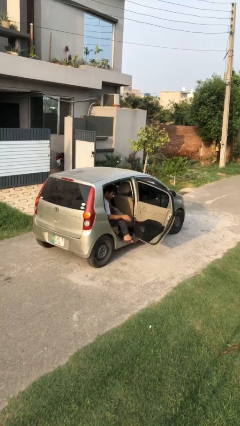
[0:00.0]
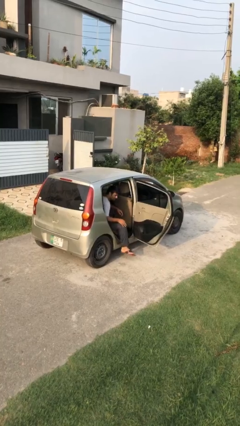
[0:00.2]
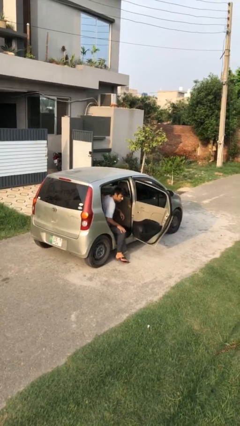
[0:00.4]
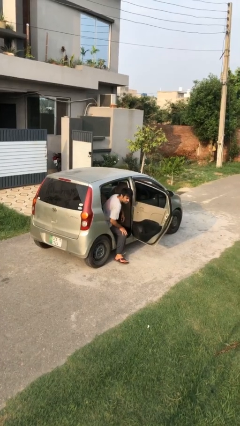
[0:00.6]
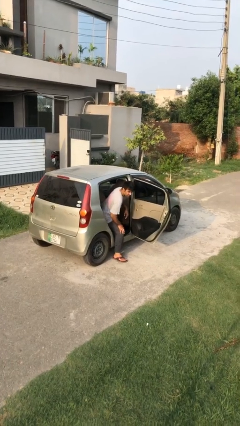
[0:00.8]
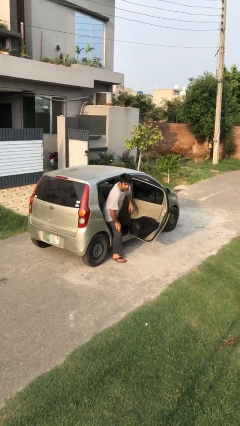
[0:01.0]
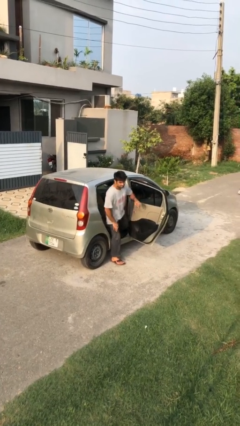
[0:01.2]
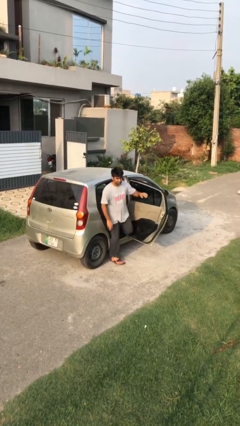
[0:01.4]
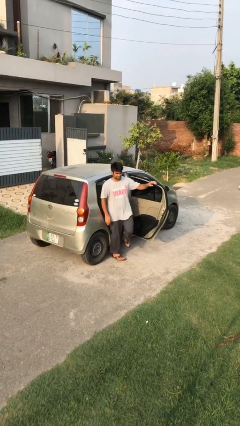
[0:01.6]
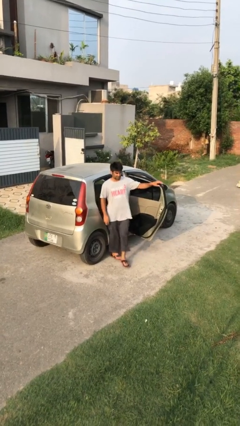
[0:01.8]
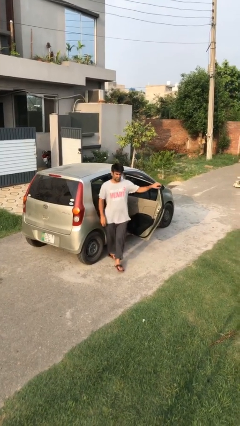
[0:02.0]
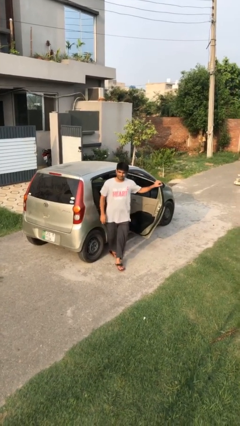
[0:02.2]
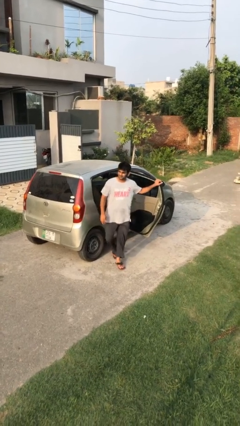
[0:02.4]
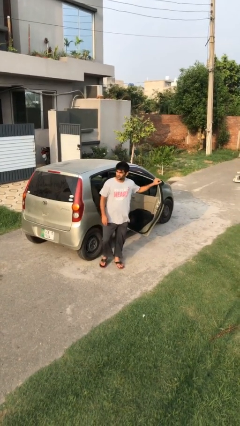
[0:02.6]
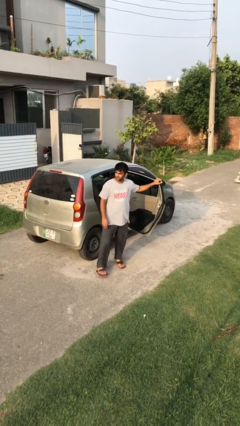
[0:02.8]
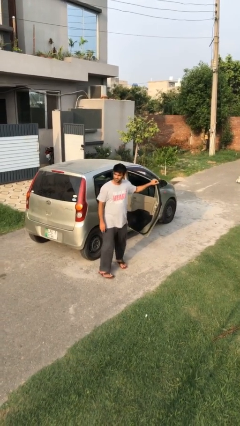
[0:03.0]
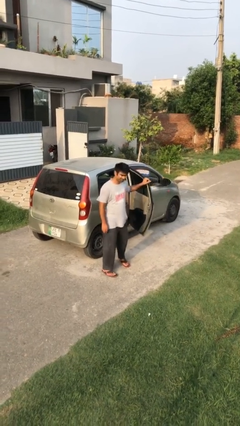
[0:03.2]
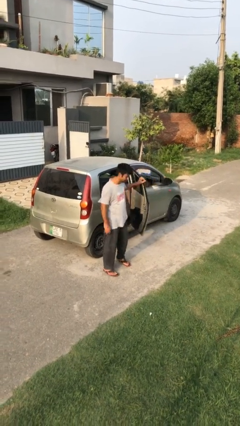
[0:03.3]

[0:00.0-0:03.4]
person exits car

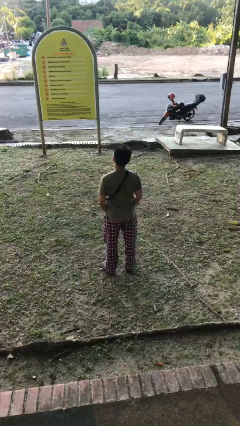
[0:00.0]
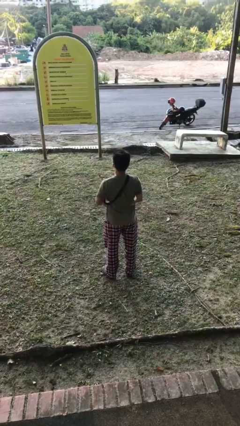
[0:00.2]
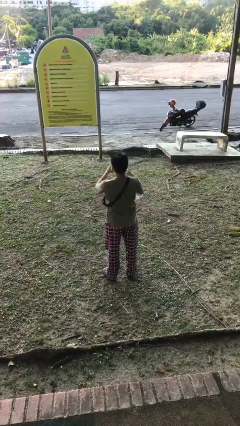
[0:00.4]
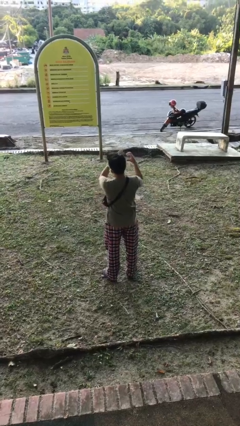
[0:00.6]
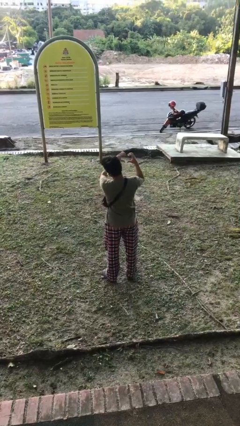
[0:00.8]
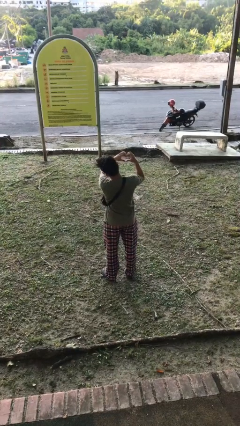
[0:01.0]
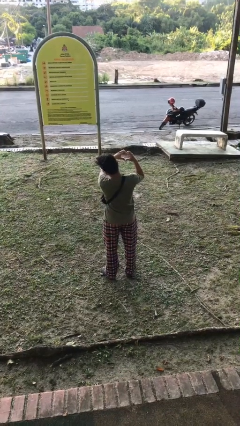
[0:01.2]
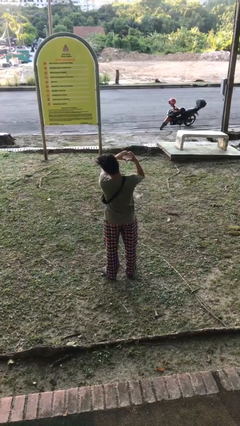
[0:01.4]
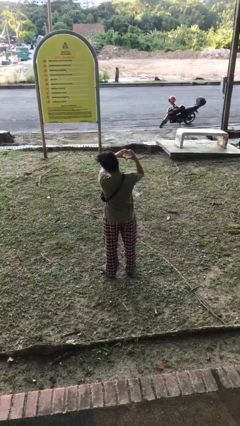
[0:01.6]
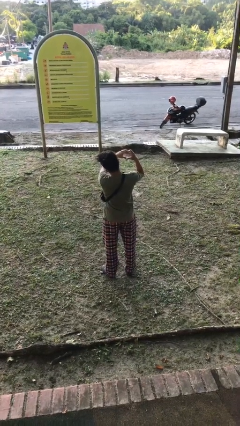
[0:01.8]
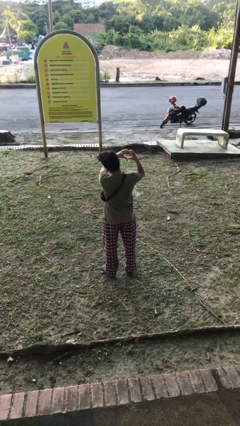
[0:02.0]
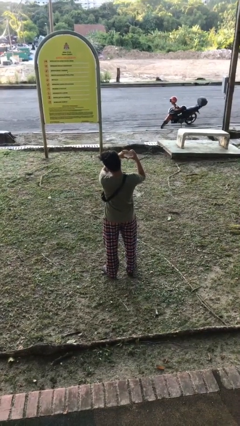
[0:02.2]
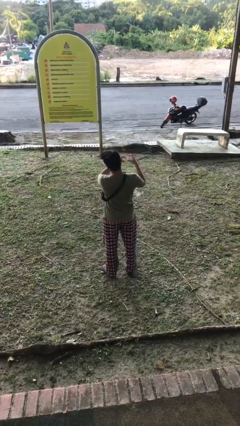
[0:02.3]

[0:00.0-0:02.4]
person gestures heart

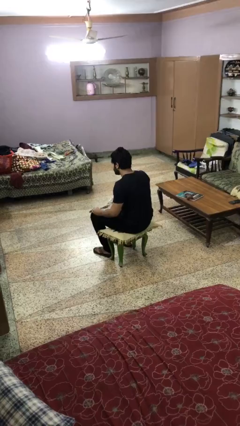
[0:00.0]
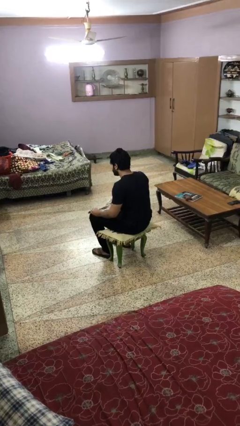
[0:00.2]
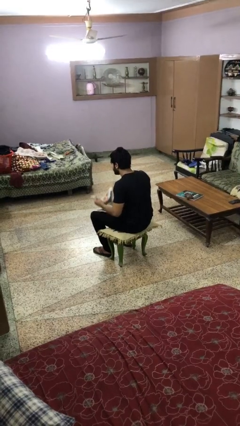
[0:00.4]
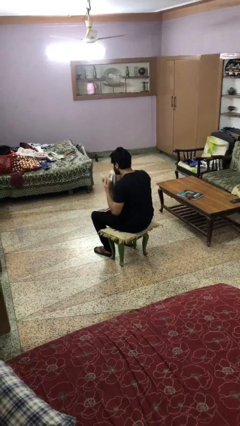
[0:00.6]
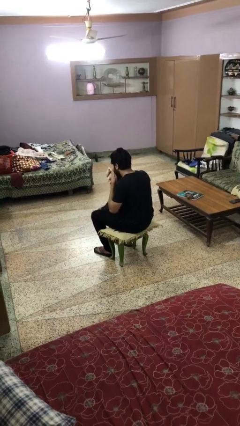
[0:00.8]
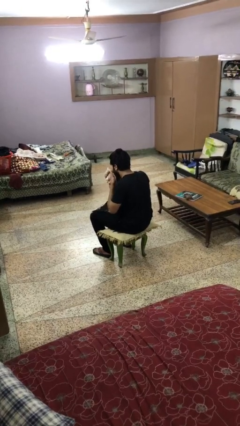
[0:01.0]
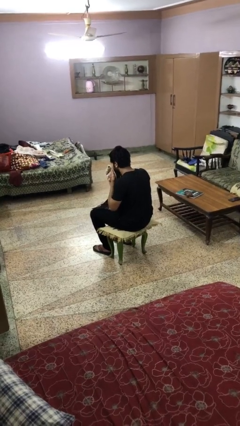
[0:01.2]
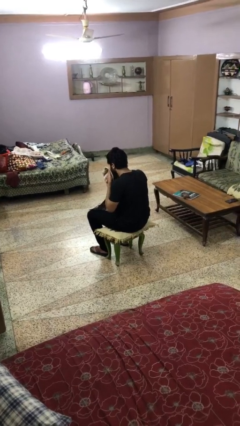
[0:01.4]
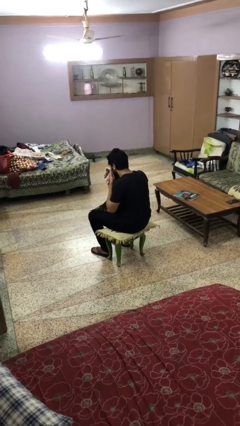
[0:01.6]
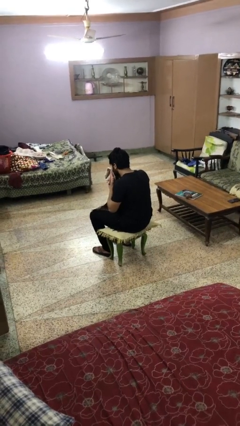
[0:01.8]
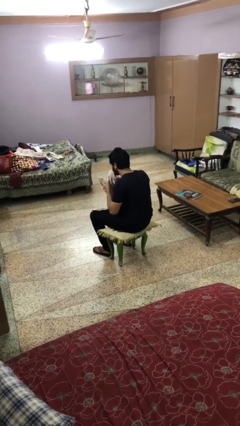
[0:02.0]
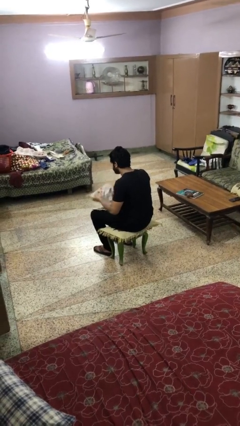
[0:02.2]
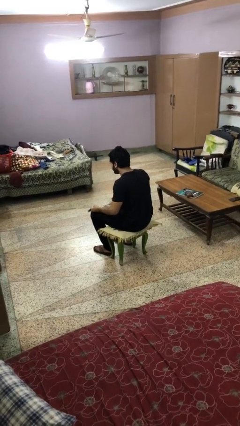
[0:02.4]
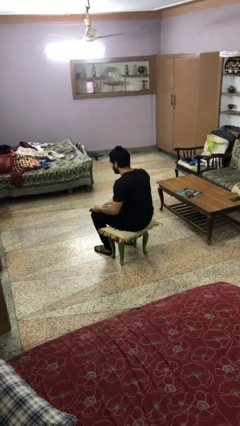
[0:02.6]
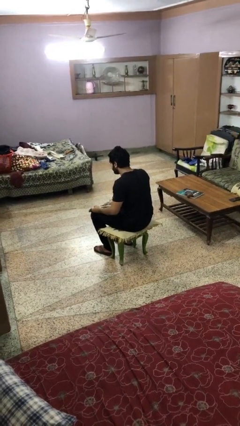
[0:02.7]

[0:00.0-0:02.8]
person wipes mouth with napkin

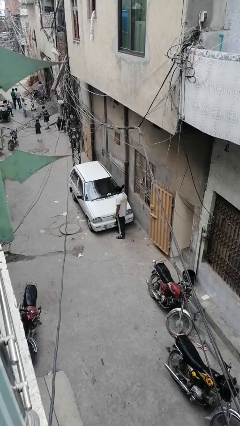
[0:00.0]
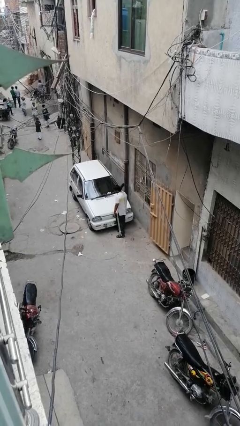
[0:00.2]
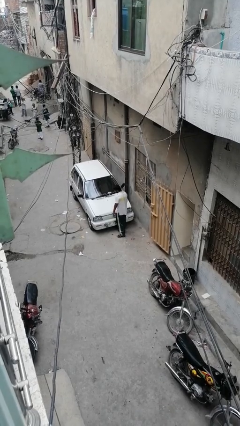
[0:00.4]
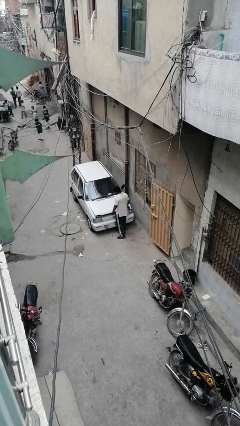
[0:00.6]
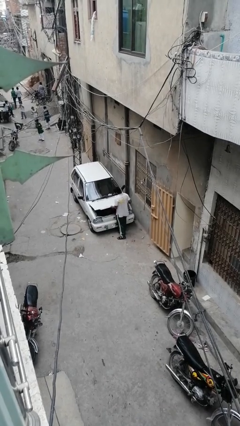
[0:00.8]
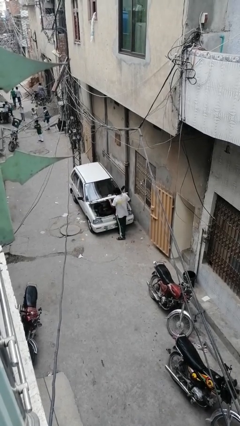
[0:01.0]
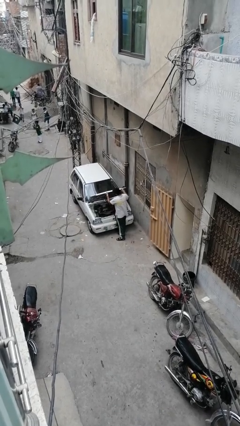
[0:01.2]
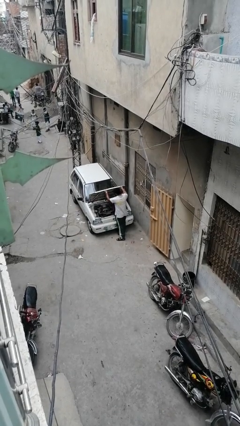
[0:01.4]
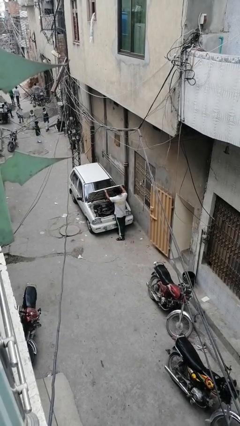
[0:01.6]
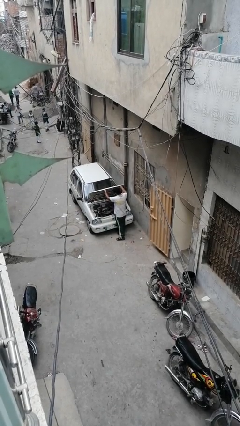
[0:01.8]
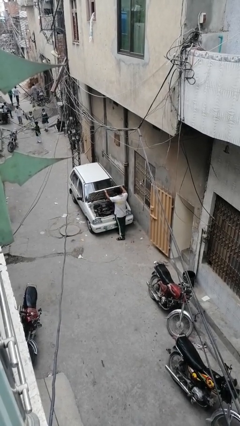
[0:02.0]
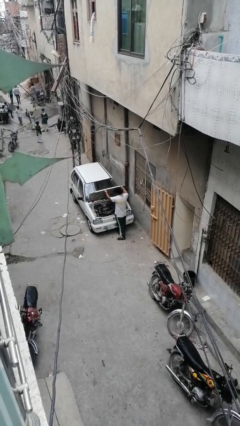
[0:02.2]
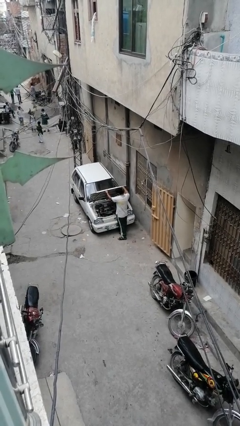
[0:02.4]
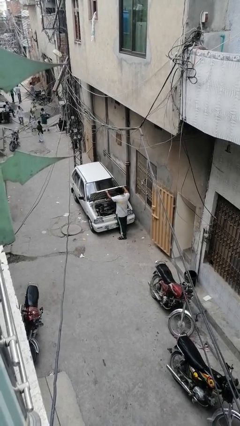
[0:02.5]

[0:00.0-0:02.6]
person opens car hood

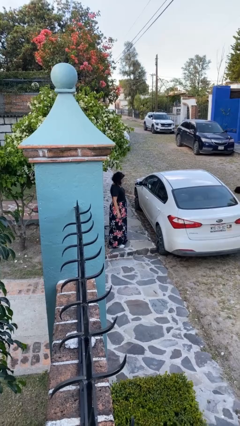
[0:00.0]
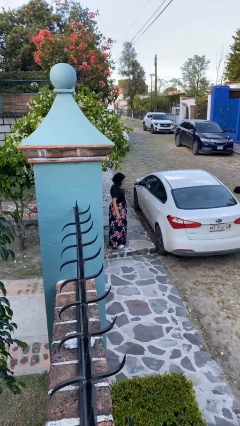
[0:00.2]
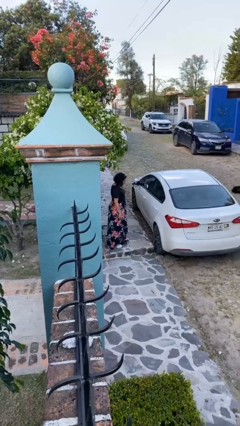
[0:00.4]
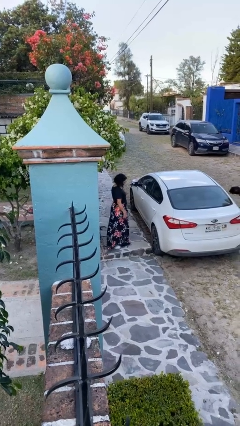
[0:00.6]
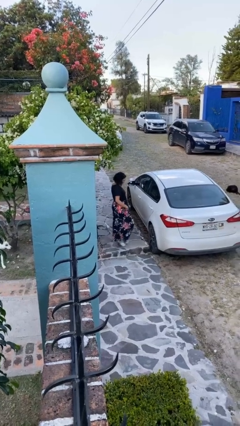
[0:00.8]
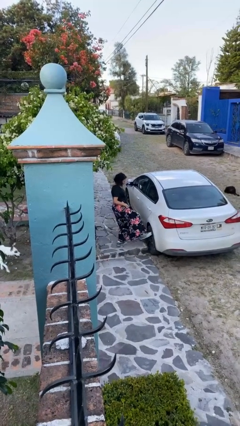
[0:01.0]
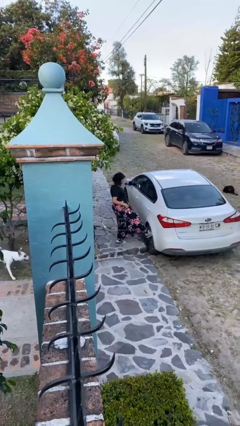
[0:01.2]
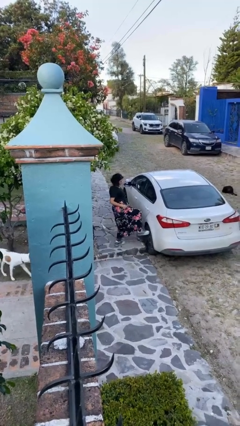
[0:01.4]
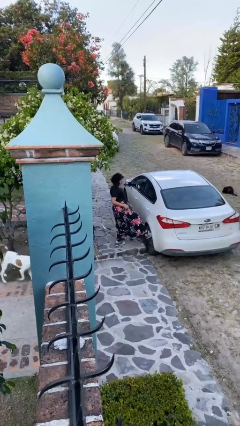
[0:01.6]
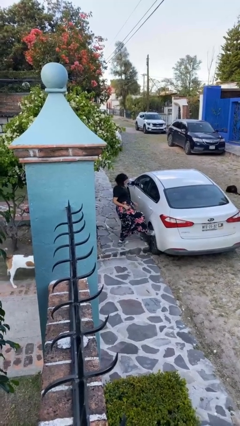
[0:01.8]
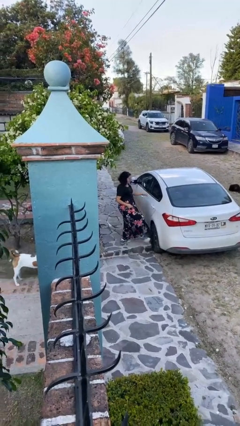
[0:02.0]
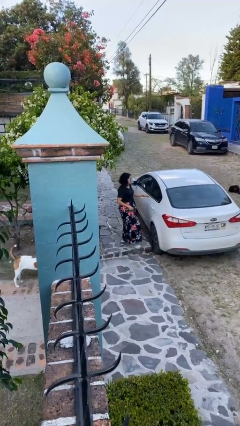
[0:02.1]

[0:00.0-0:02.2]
person kicks car tires

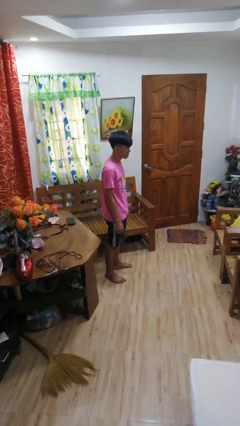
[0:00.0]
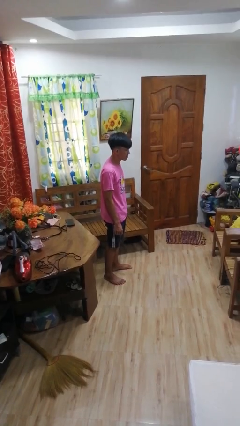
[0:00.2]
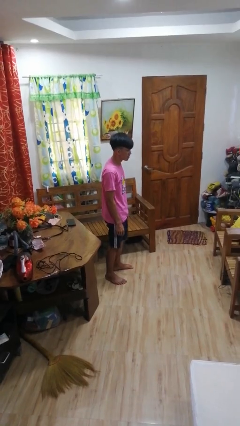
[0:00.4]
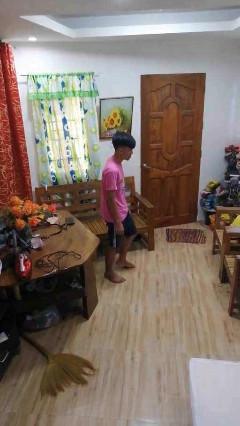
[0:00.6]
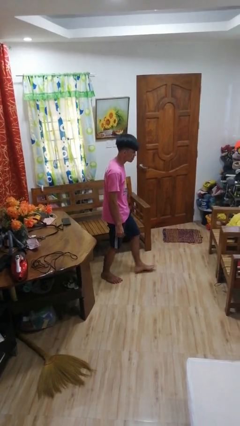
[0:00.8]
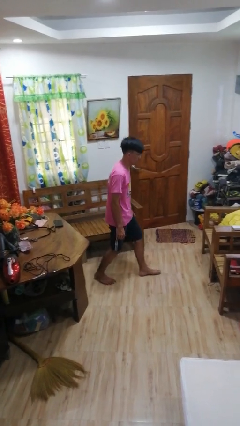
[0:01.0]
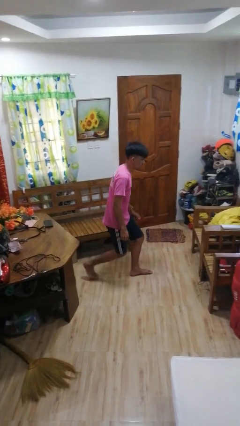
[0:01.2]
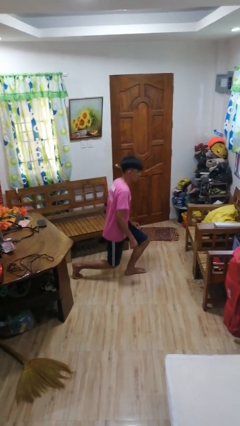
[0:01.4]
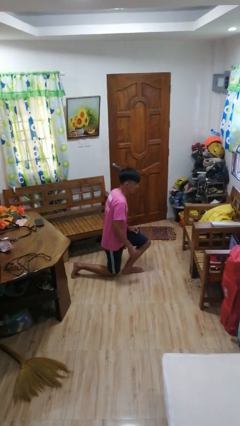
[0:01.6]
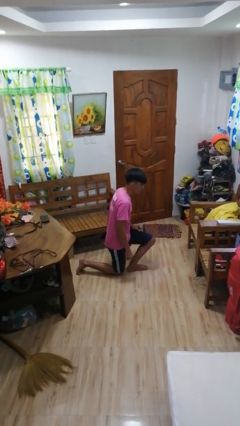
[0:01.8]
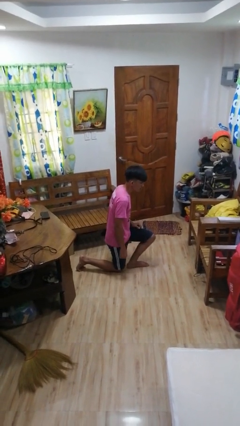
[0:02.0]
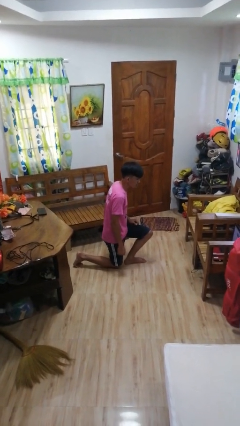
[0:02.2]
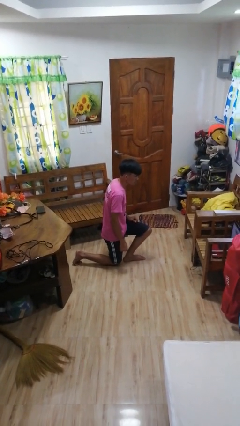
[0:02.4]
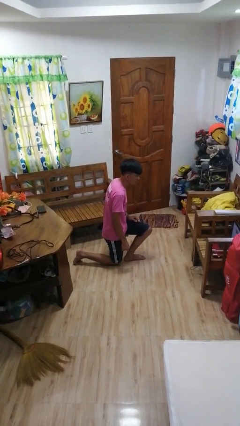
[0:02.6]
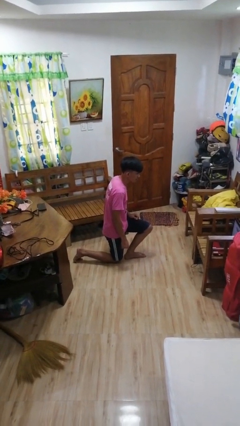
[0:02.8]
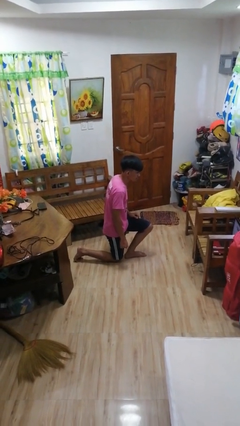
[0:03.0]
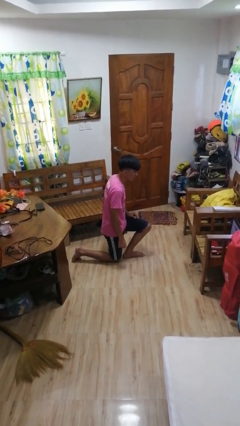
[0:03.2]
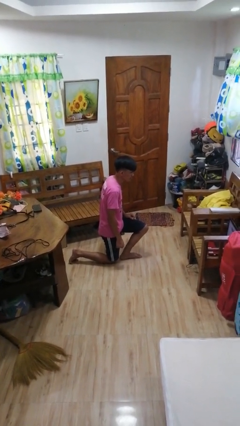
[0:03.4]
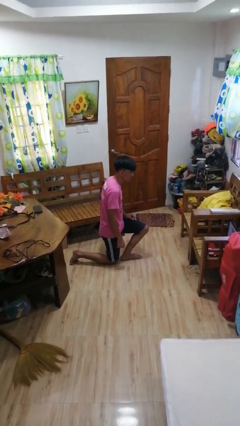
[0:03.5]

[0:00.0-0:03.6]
person kneels
